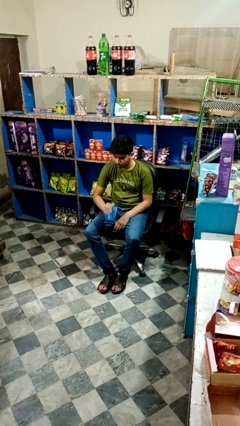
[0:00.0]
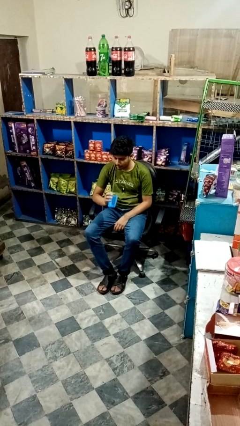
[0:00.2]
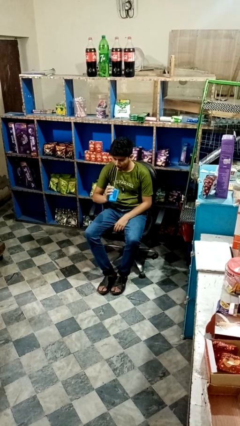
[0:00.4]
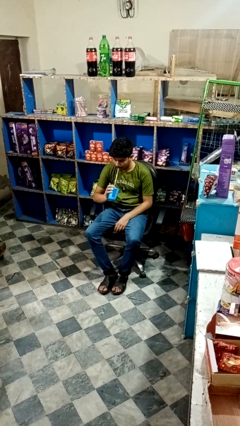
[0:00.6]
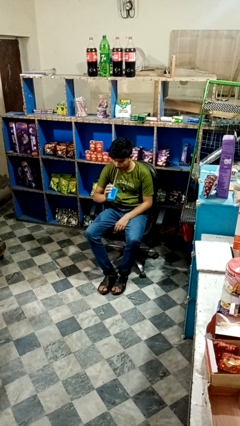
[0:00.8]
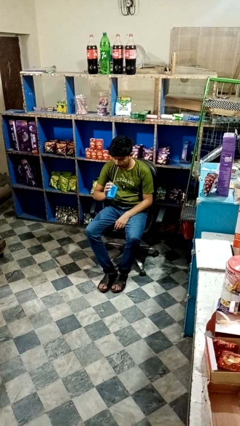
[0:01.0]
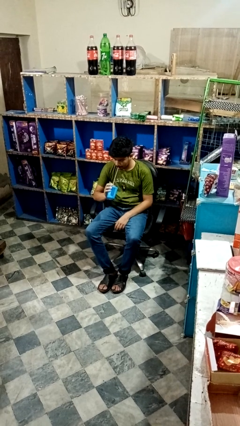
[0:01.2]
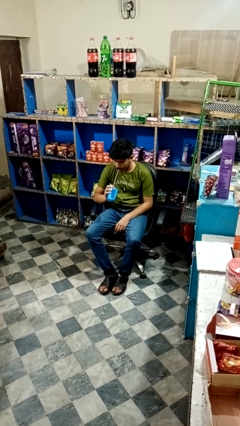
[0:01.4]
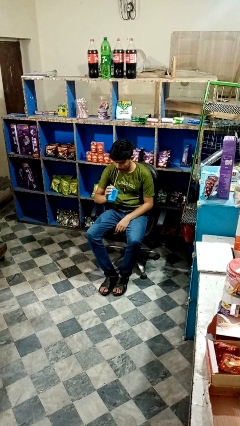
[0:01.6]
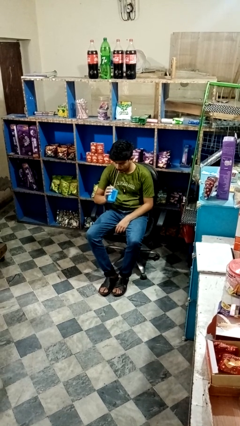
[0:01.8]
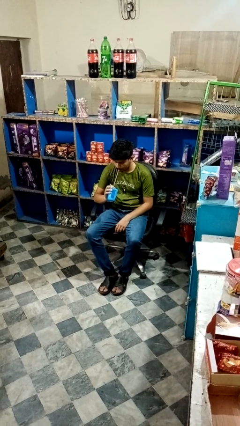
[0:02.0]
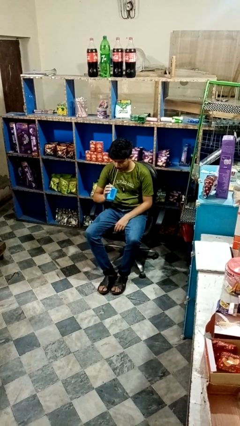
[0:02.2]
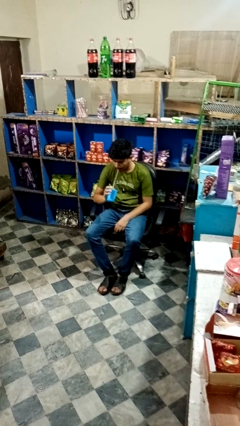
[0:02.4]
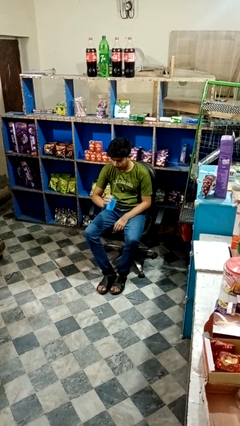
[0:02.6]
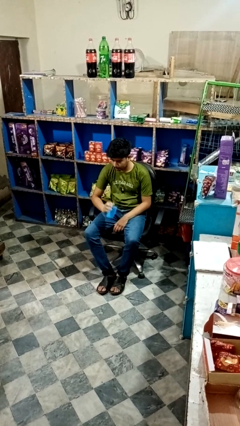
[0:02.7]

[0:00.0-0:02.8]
person drinks from straw

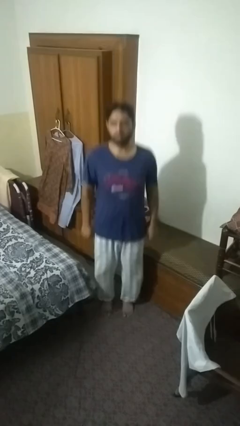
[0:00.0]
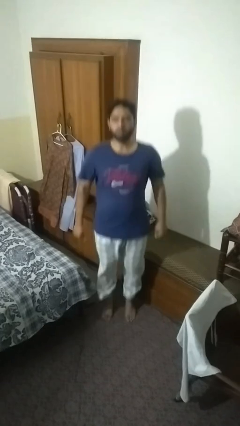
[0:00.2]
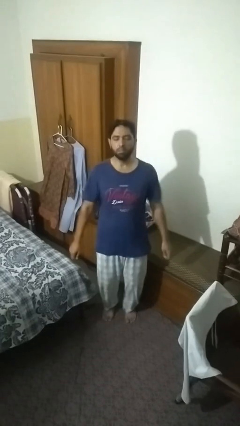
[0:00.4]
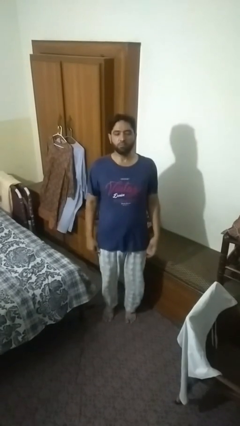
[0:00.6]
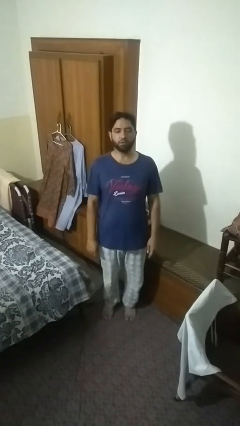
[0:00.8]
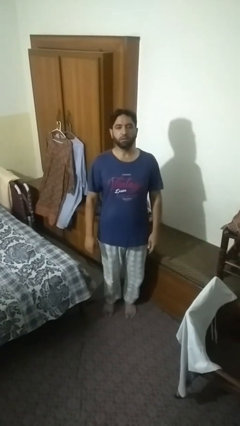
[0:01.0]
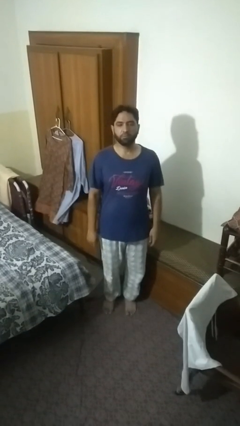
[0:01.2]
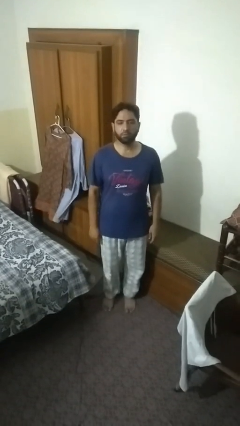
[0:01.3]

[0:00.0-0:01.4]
person jumps

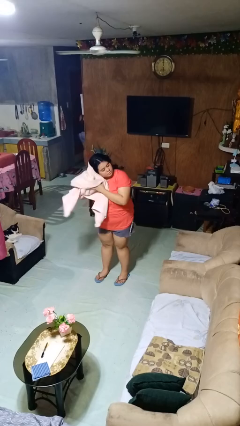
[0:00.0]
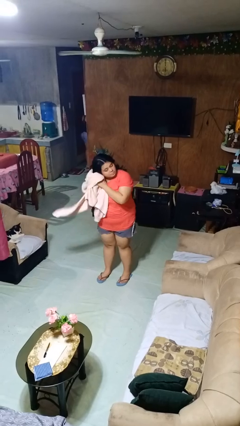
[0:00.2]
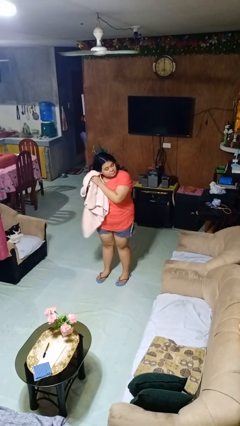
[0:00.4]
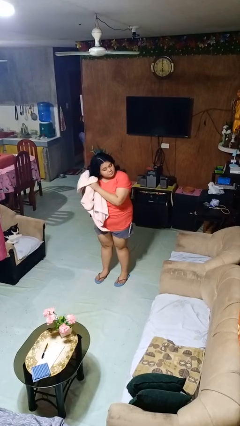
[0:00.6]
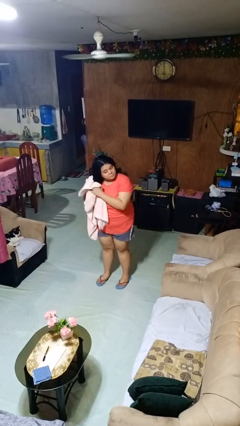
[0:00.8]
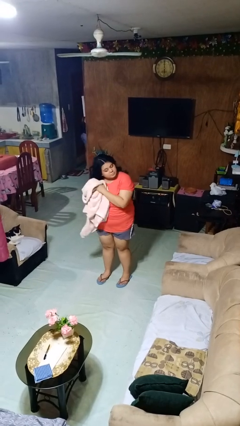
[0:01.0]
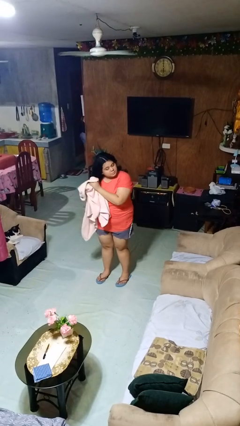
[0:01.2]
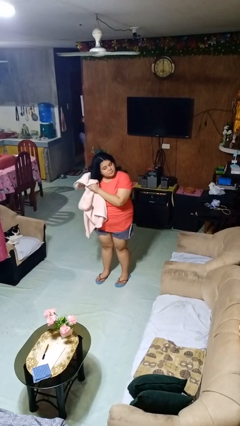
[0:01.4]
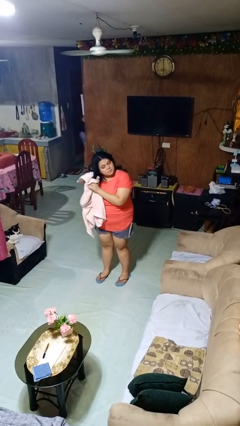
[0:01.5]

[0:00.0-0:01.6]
person dries hair with towel

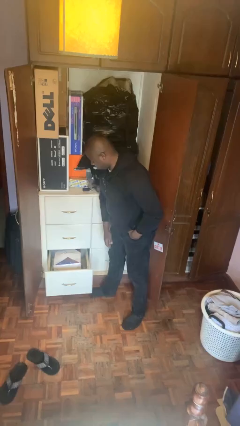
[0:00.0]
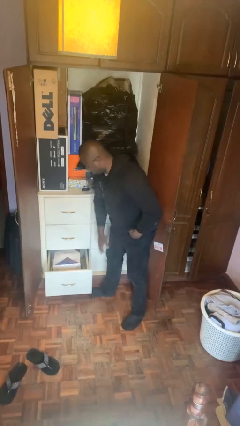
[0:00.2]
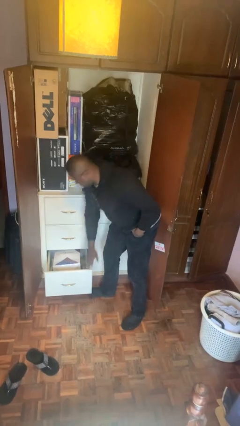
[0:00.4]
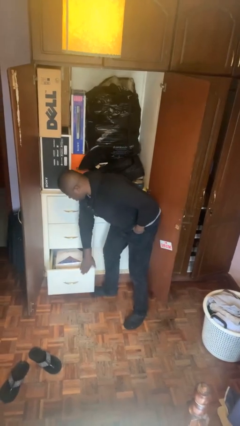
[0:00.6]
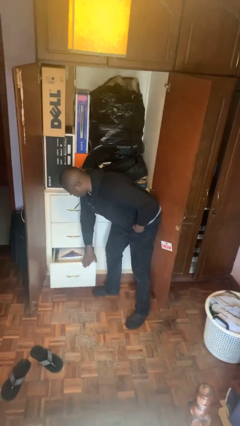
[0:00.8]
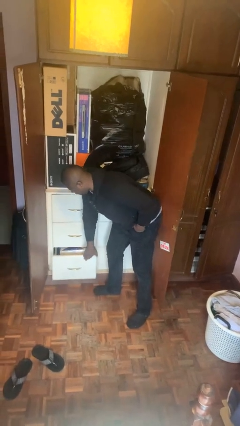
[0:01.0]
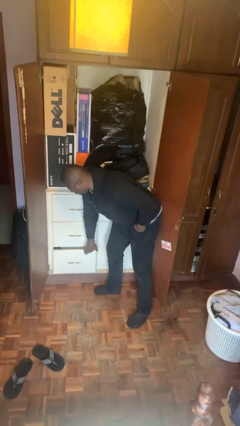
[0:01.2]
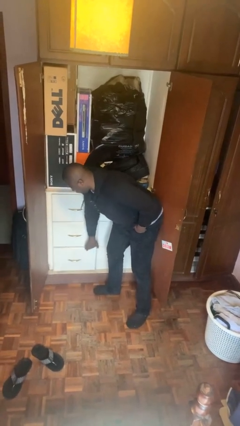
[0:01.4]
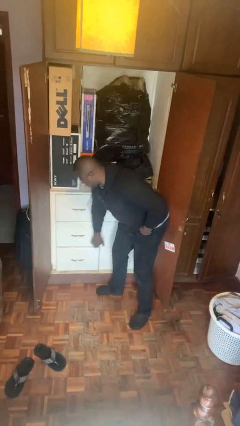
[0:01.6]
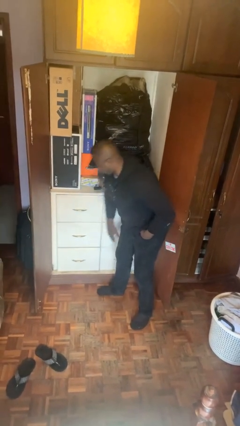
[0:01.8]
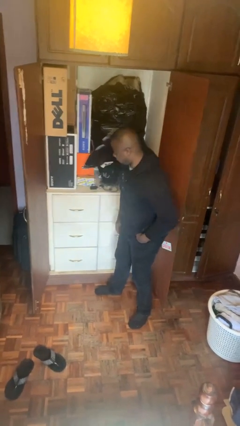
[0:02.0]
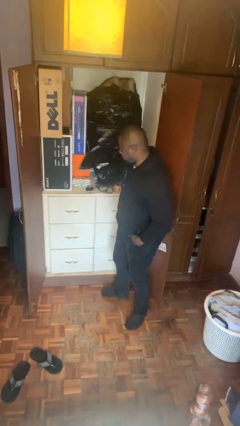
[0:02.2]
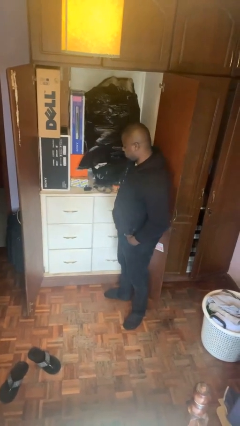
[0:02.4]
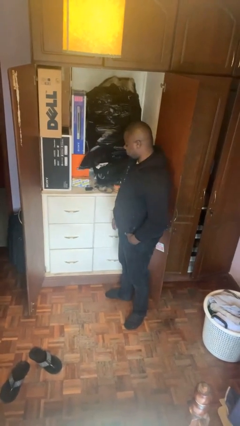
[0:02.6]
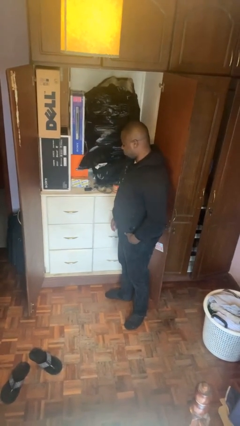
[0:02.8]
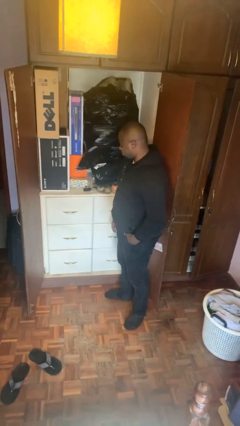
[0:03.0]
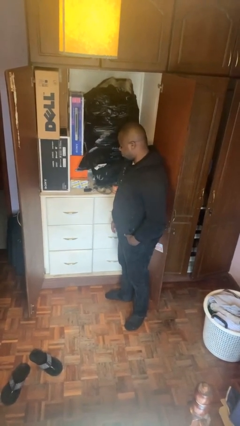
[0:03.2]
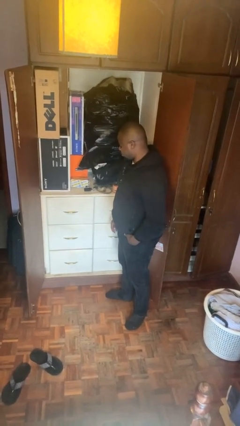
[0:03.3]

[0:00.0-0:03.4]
person closes dresser drawer

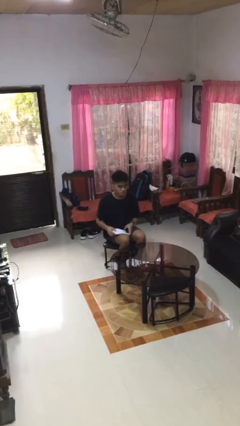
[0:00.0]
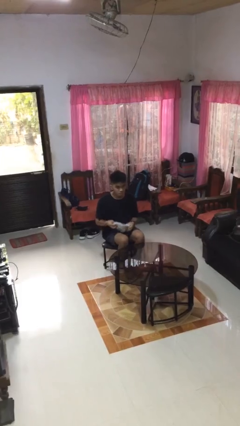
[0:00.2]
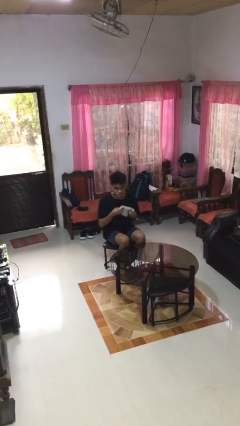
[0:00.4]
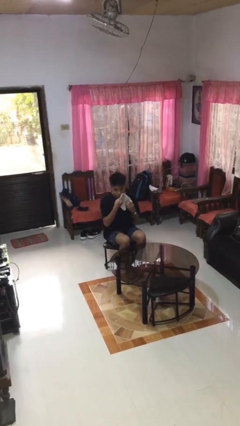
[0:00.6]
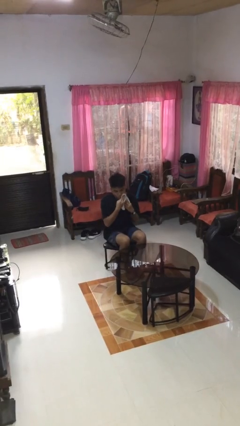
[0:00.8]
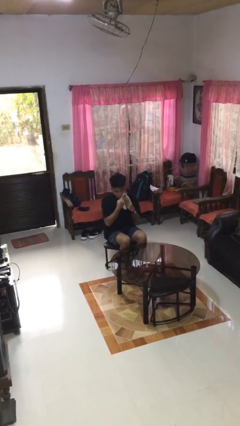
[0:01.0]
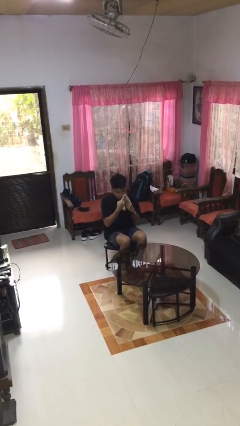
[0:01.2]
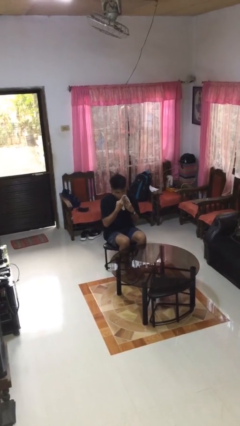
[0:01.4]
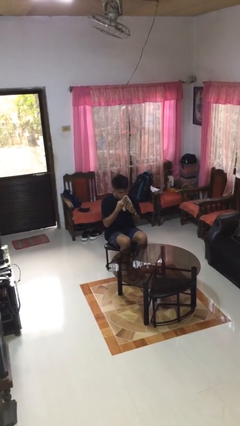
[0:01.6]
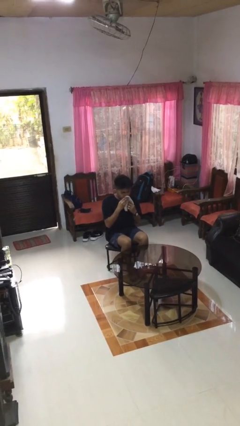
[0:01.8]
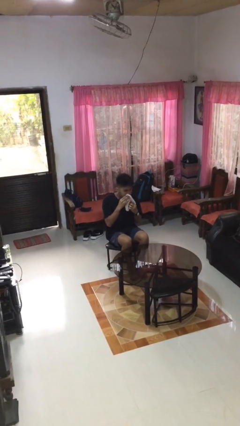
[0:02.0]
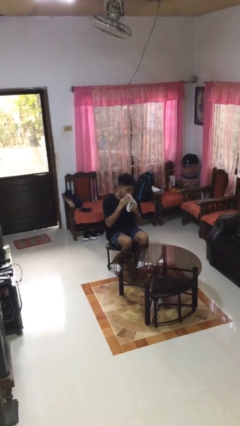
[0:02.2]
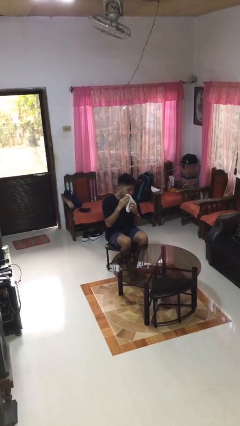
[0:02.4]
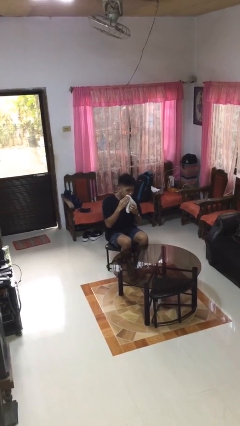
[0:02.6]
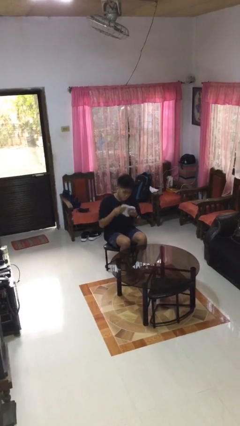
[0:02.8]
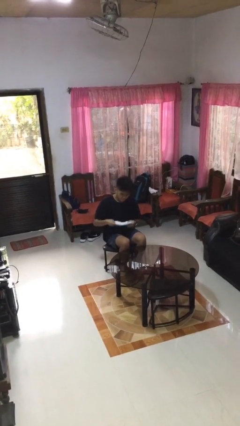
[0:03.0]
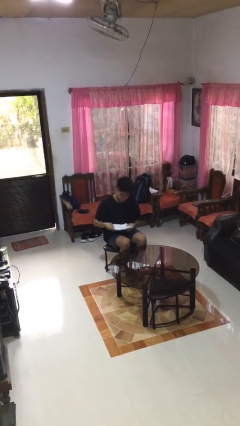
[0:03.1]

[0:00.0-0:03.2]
person wipes mouth with napkin

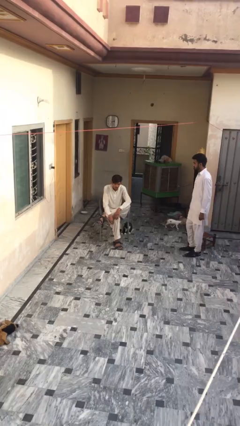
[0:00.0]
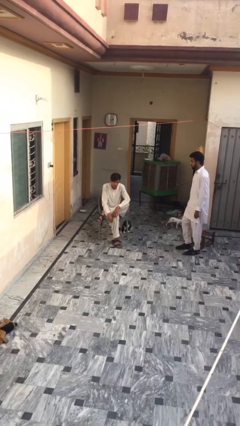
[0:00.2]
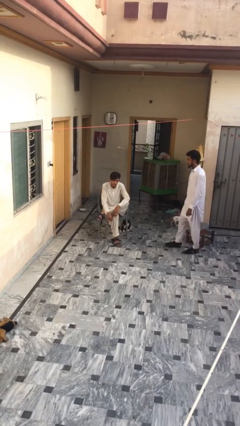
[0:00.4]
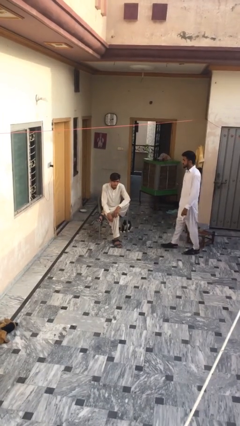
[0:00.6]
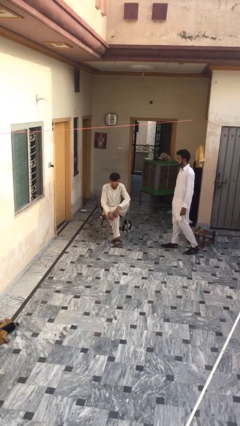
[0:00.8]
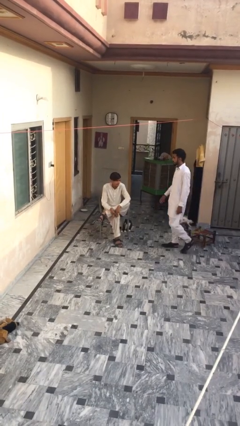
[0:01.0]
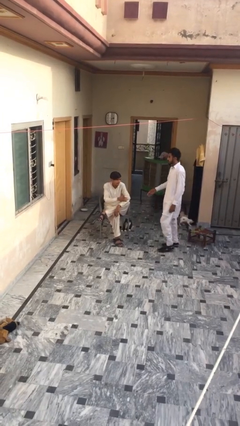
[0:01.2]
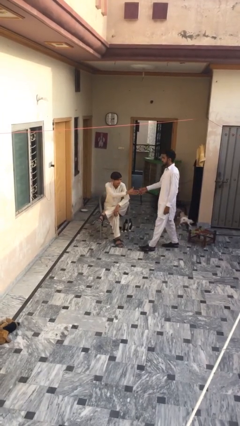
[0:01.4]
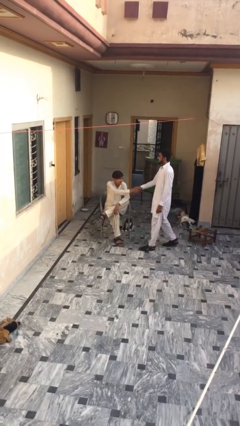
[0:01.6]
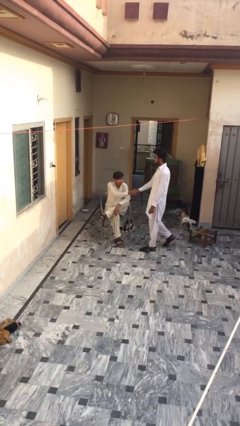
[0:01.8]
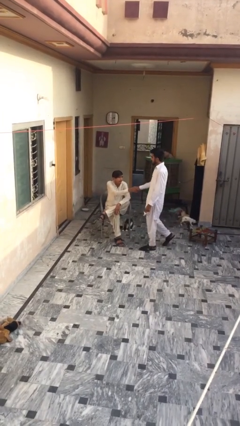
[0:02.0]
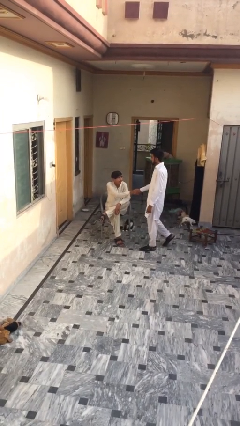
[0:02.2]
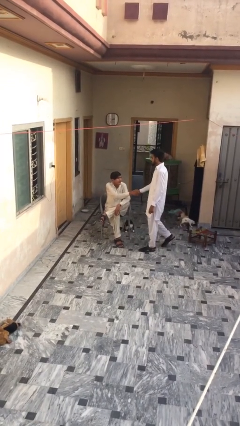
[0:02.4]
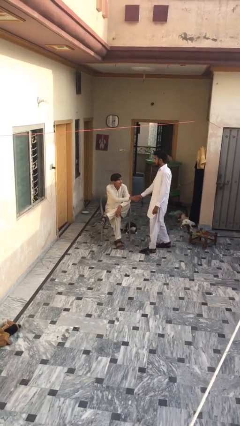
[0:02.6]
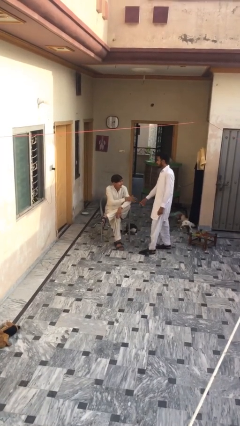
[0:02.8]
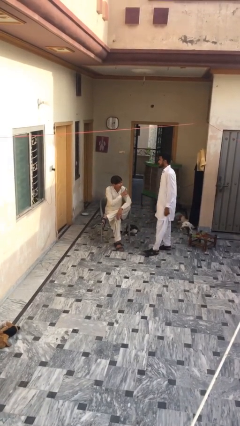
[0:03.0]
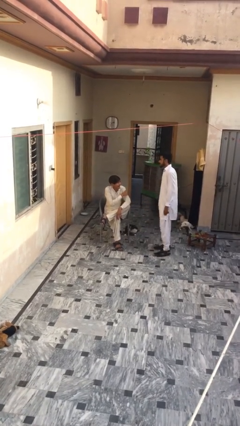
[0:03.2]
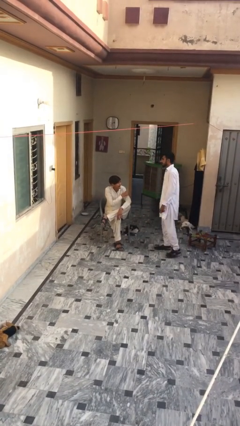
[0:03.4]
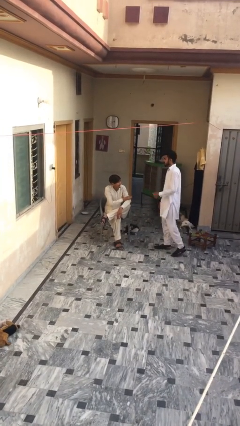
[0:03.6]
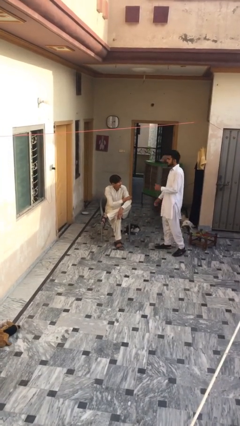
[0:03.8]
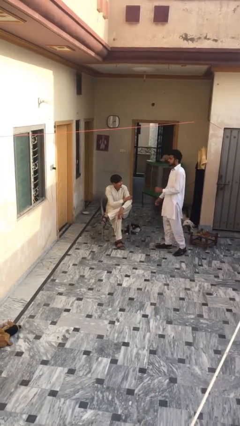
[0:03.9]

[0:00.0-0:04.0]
person shakes hand

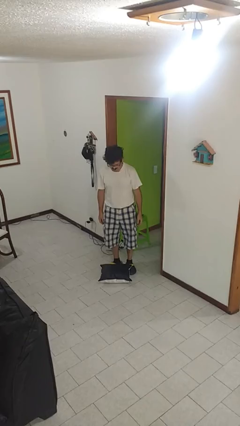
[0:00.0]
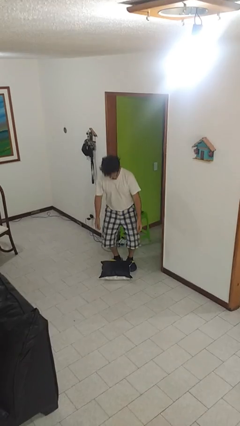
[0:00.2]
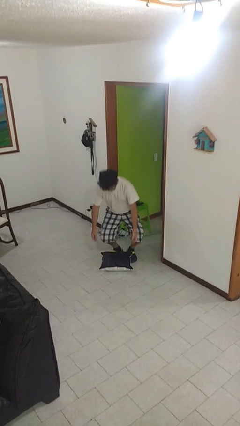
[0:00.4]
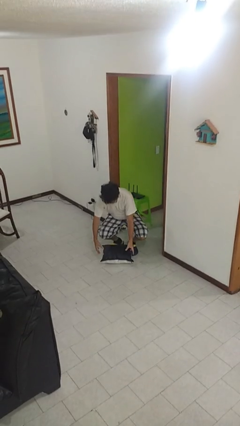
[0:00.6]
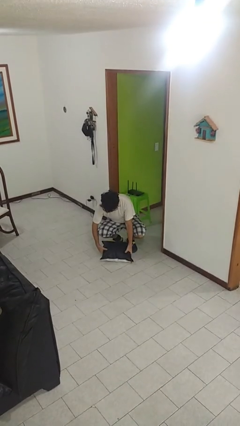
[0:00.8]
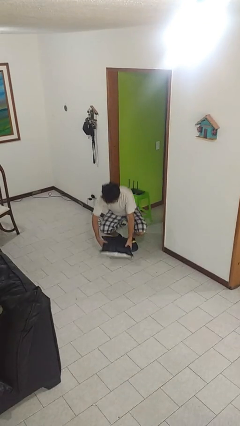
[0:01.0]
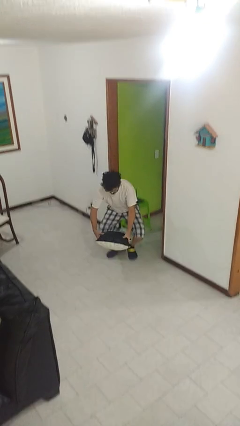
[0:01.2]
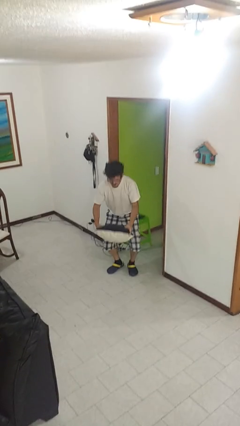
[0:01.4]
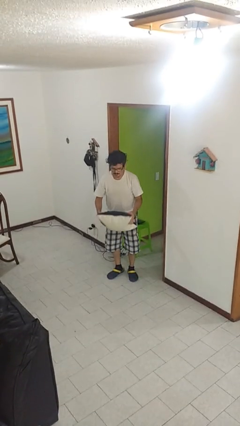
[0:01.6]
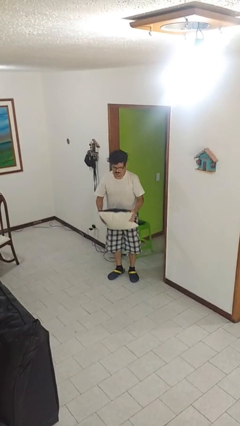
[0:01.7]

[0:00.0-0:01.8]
person picks up object from floor
